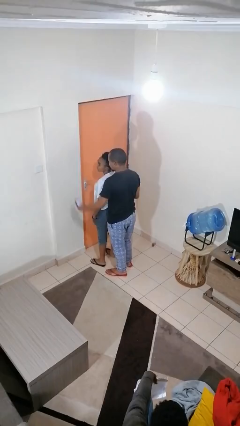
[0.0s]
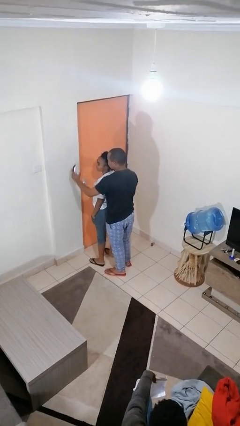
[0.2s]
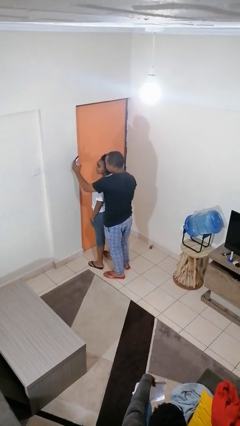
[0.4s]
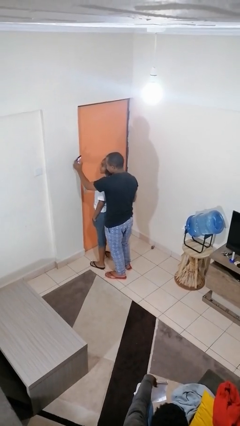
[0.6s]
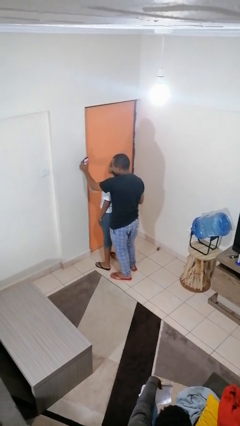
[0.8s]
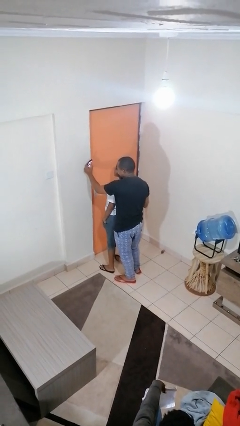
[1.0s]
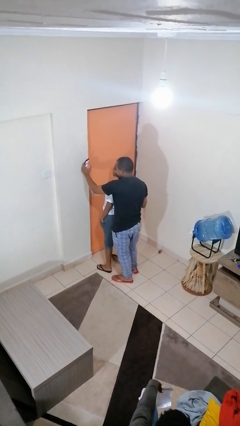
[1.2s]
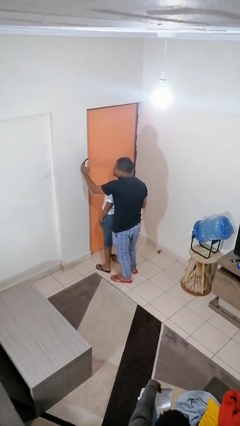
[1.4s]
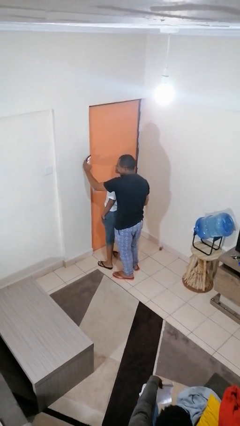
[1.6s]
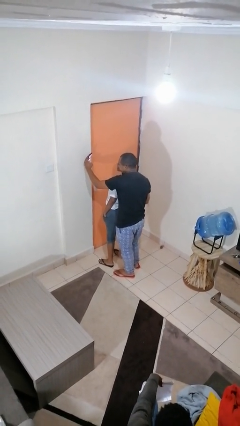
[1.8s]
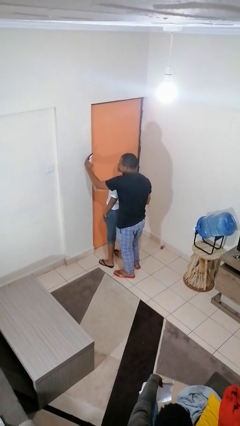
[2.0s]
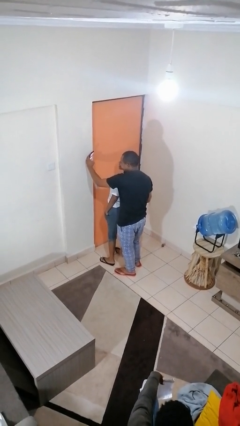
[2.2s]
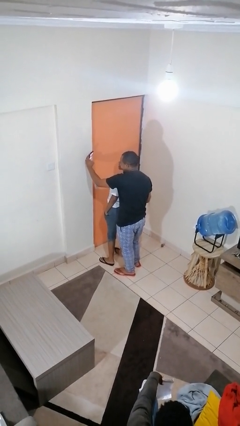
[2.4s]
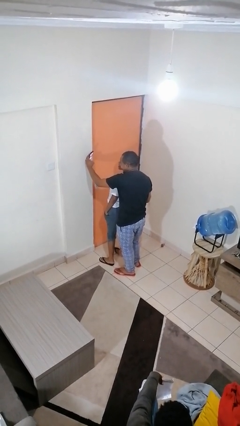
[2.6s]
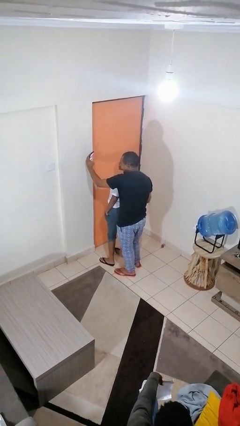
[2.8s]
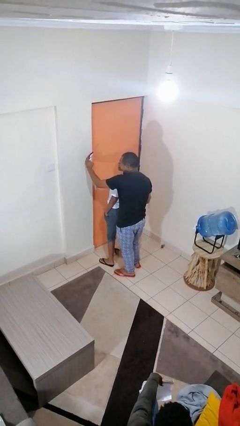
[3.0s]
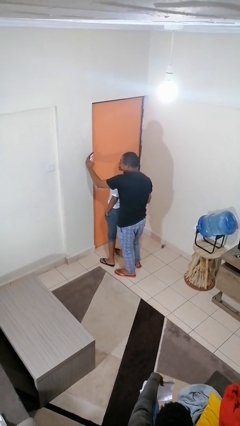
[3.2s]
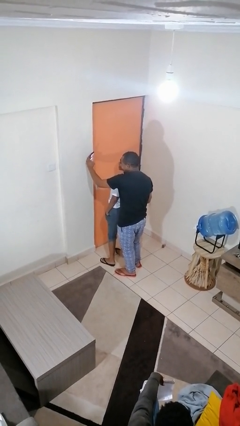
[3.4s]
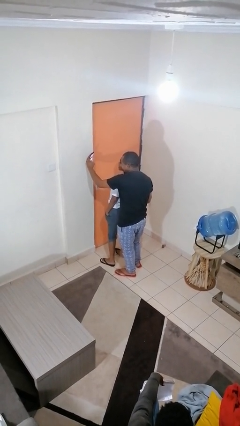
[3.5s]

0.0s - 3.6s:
person takes selfie with person

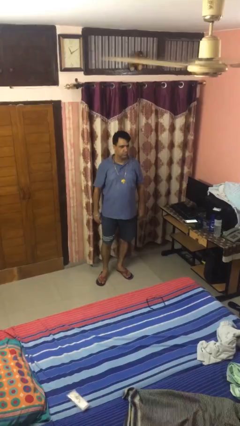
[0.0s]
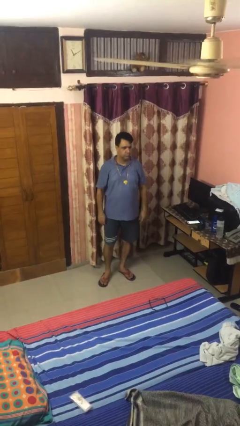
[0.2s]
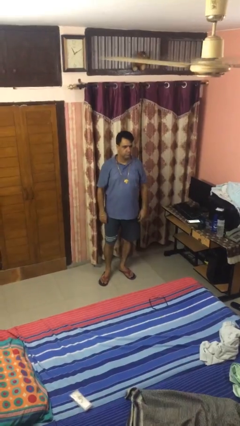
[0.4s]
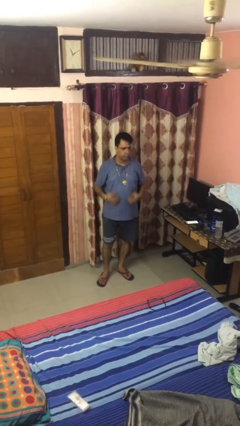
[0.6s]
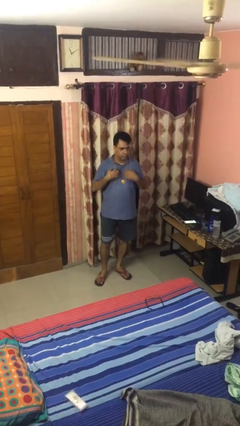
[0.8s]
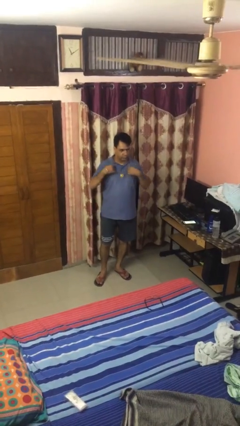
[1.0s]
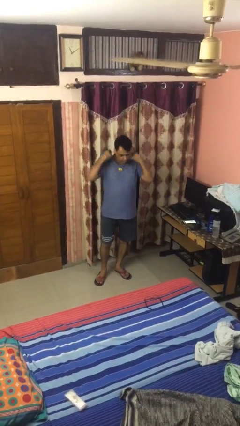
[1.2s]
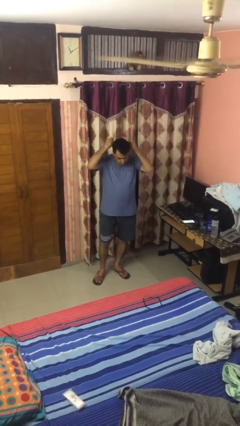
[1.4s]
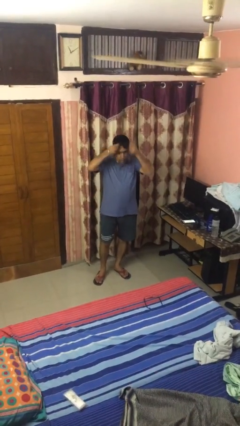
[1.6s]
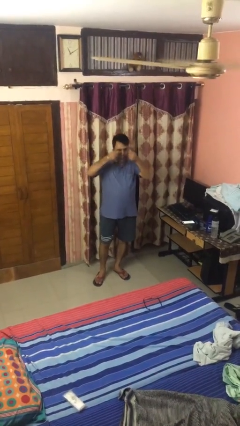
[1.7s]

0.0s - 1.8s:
person takes off necklace

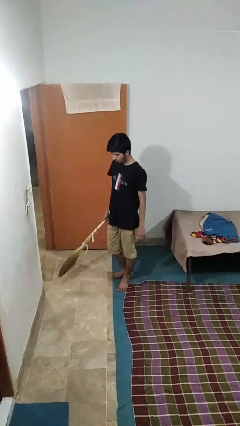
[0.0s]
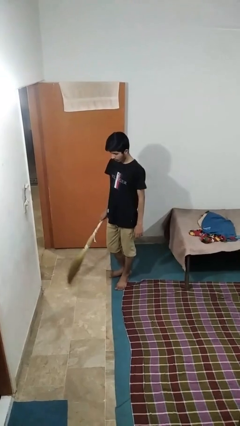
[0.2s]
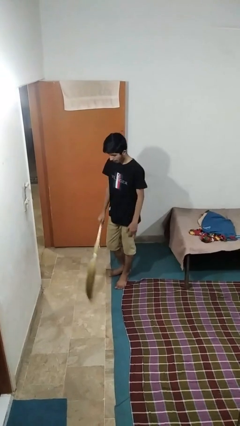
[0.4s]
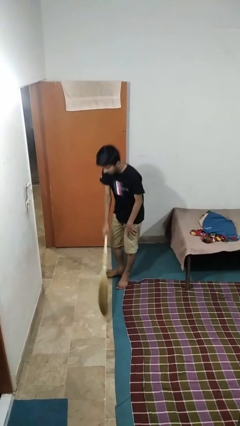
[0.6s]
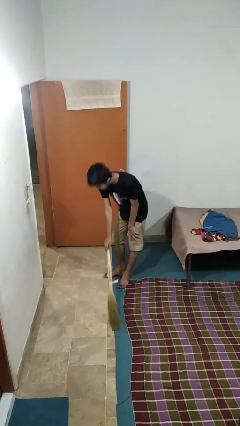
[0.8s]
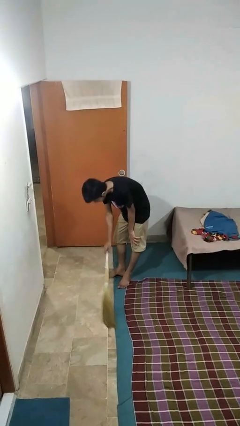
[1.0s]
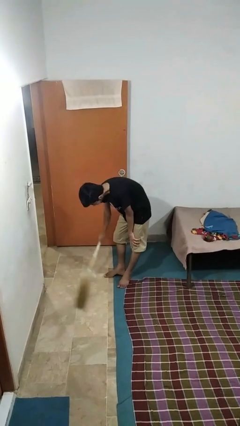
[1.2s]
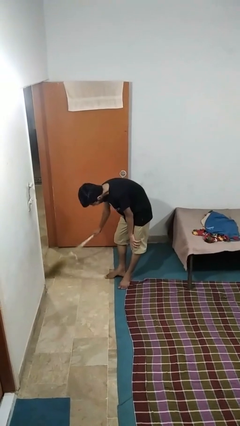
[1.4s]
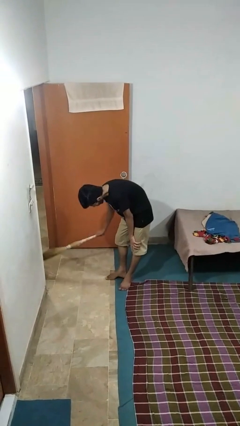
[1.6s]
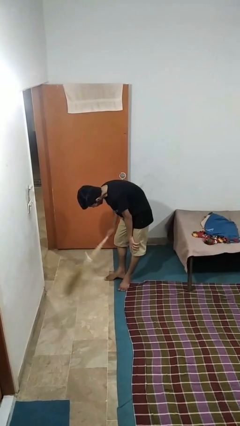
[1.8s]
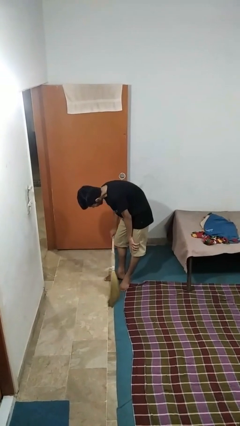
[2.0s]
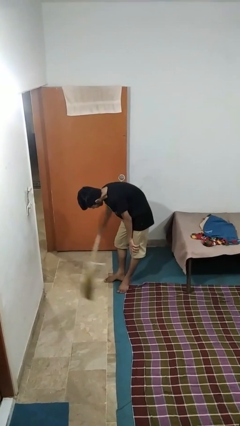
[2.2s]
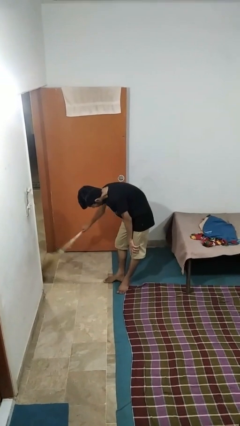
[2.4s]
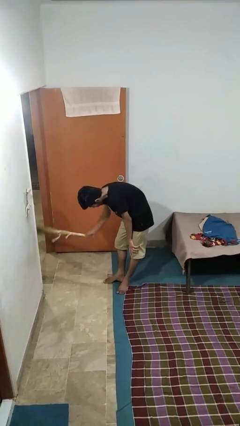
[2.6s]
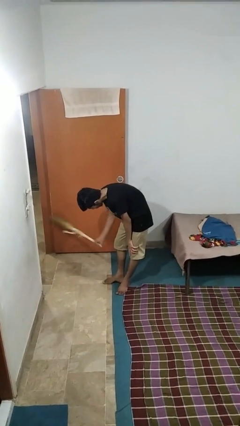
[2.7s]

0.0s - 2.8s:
person sweeps floor

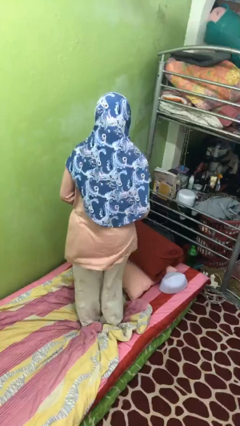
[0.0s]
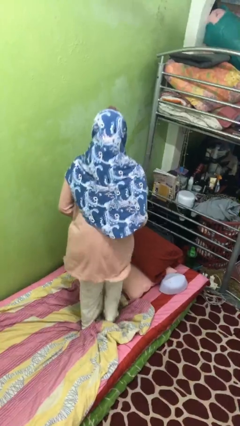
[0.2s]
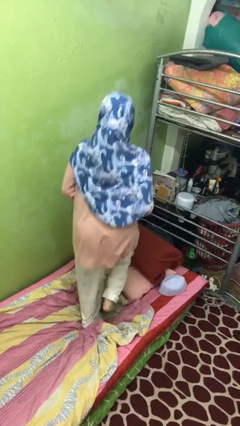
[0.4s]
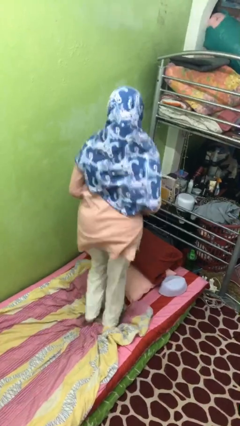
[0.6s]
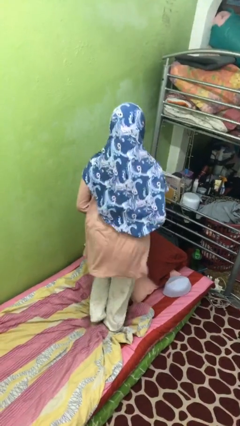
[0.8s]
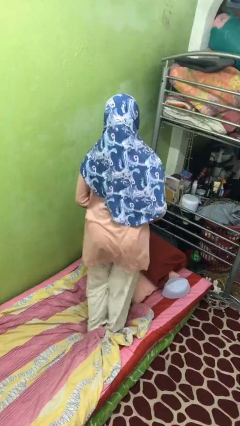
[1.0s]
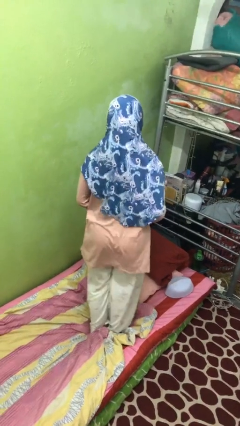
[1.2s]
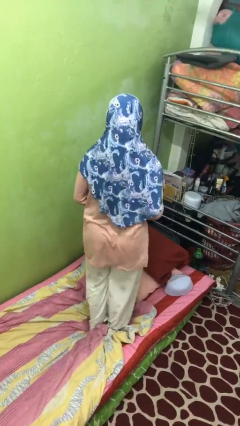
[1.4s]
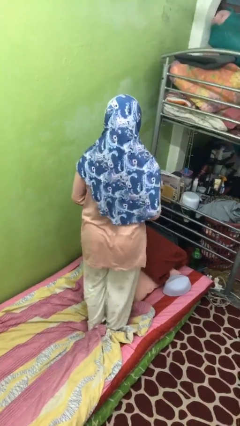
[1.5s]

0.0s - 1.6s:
person jumps on bed

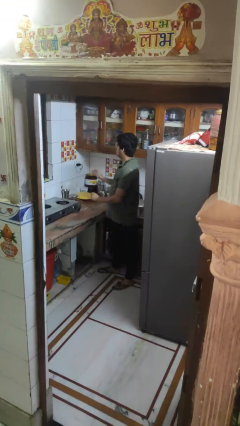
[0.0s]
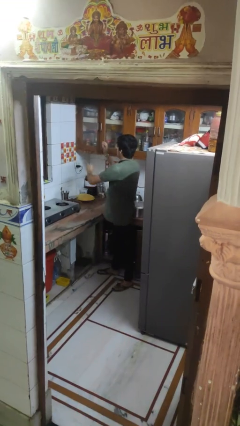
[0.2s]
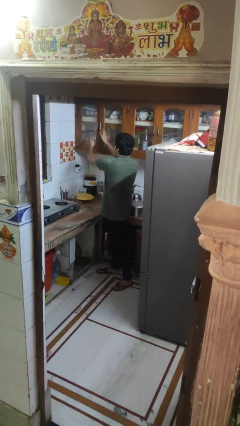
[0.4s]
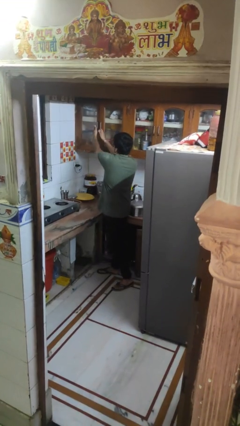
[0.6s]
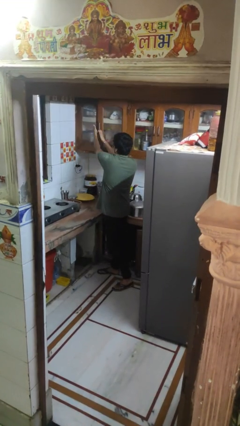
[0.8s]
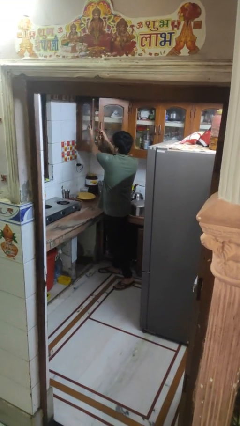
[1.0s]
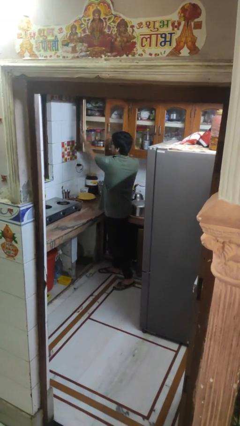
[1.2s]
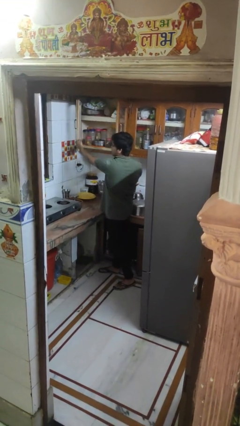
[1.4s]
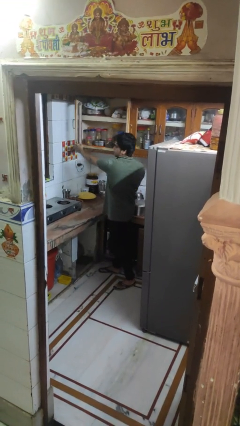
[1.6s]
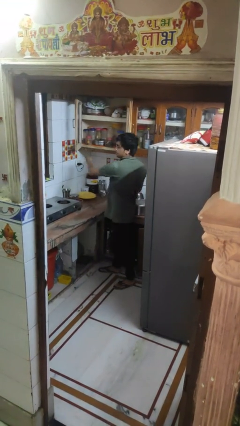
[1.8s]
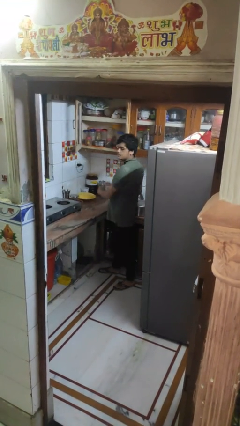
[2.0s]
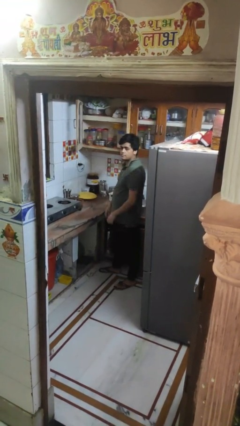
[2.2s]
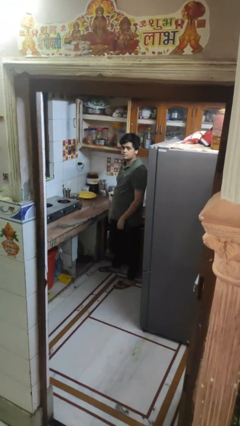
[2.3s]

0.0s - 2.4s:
person opens cabinet

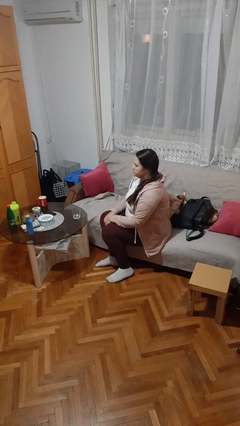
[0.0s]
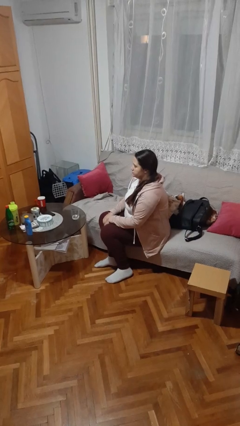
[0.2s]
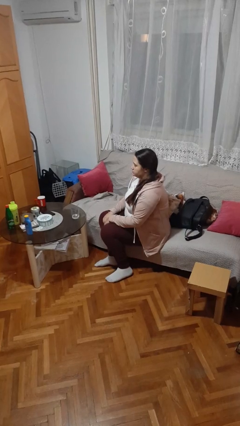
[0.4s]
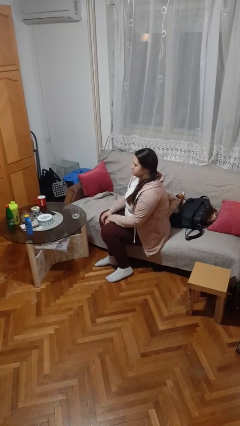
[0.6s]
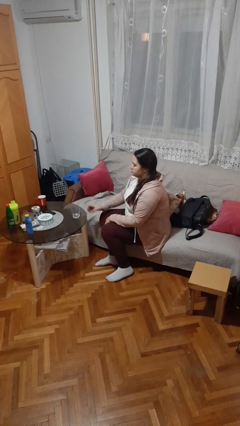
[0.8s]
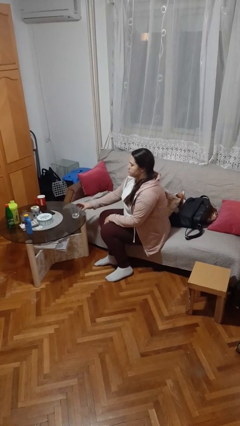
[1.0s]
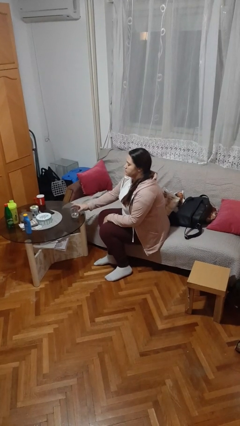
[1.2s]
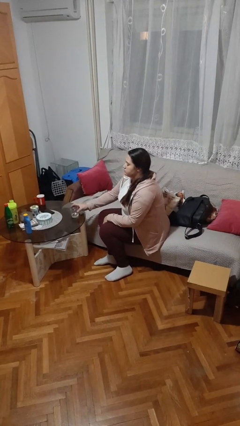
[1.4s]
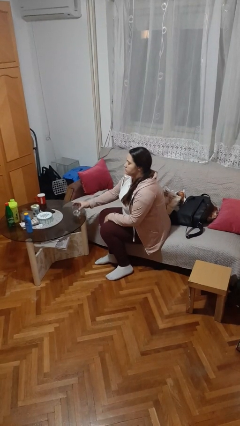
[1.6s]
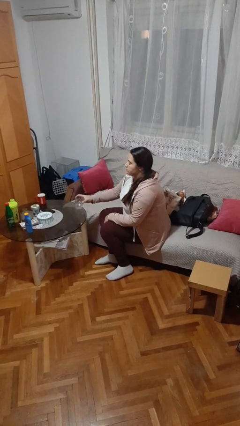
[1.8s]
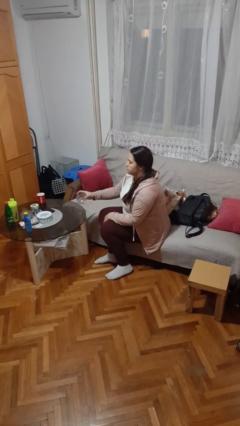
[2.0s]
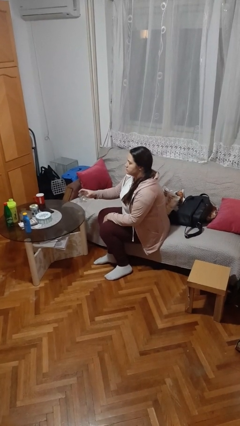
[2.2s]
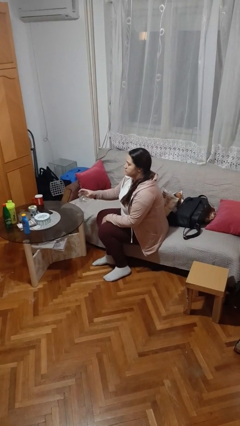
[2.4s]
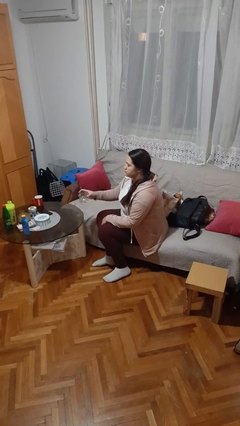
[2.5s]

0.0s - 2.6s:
person picks up object from table

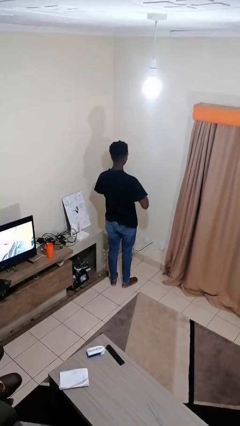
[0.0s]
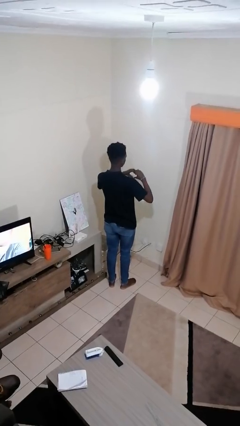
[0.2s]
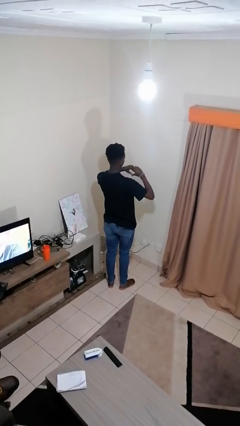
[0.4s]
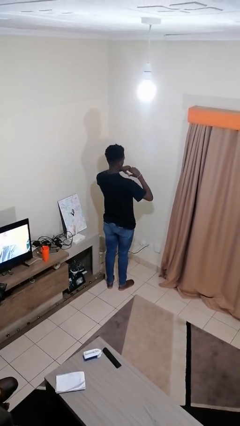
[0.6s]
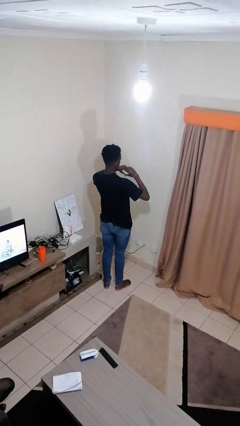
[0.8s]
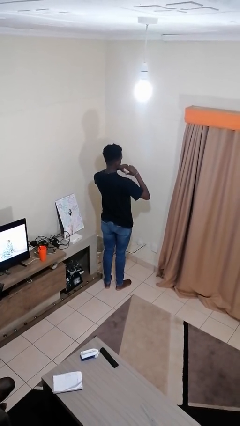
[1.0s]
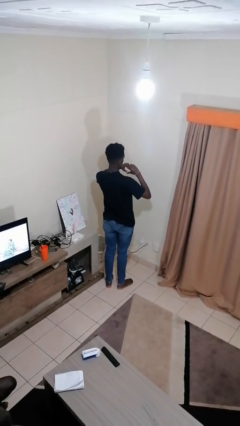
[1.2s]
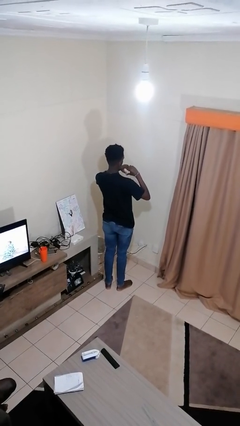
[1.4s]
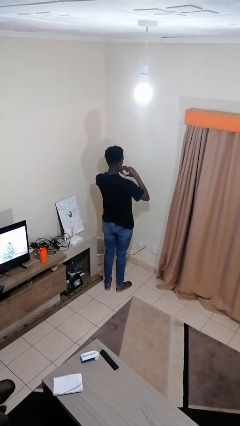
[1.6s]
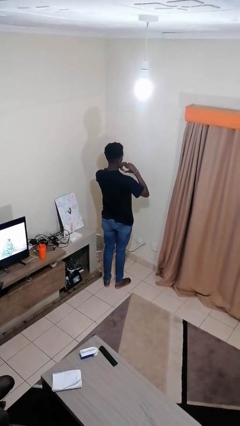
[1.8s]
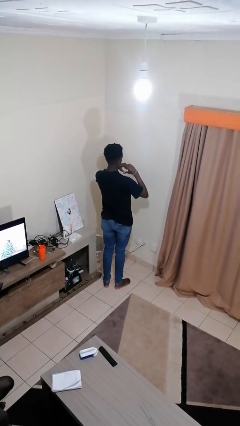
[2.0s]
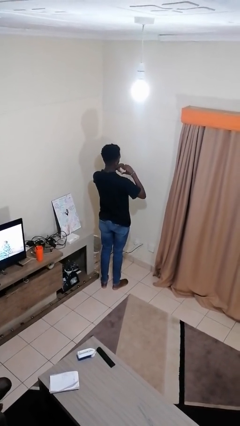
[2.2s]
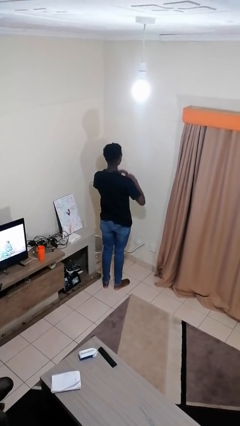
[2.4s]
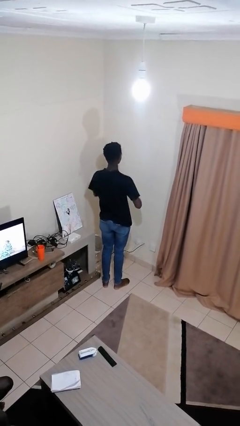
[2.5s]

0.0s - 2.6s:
person gestures heart
